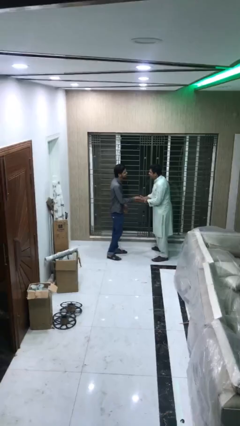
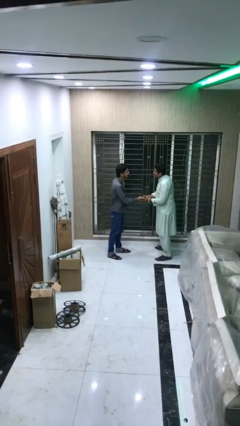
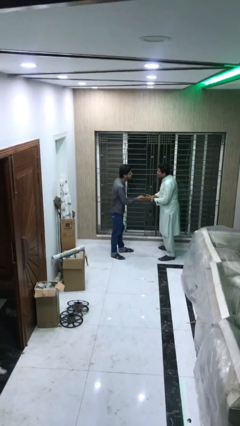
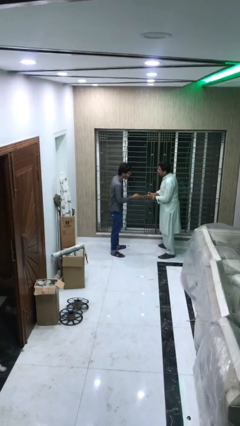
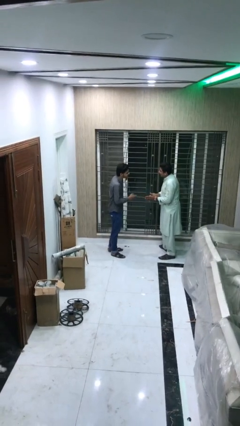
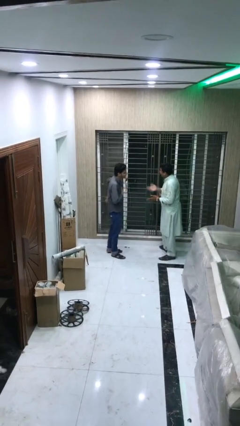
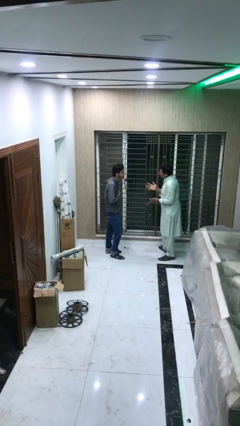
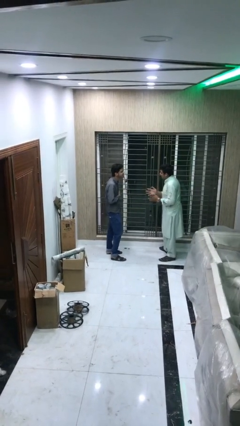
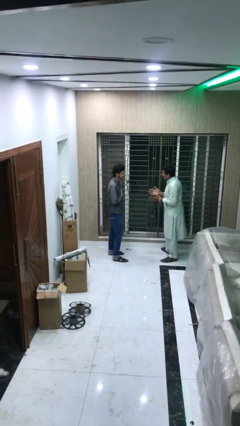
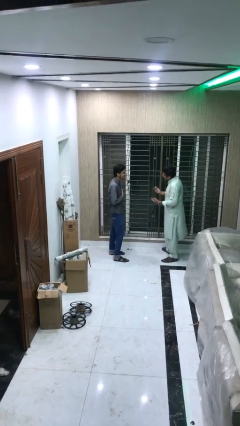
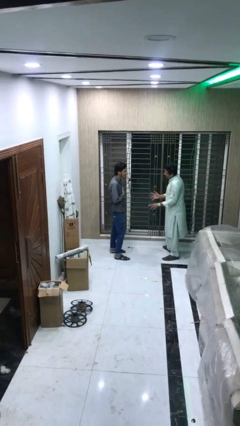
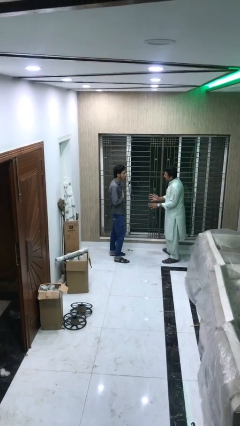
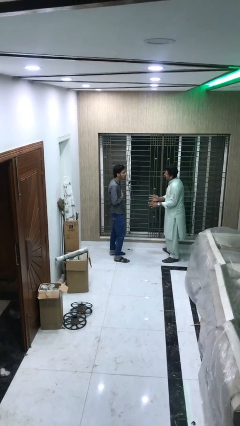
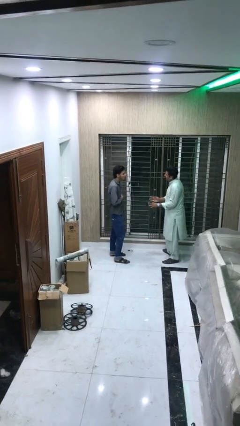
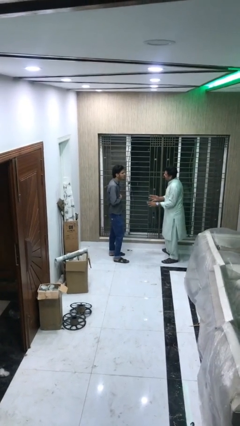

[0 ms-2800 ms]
person talks to person

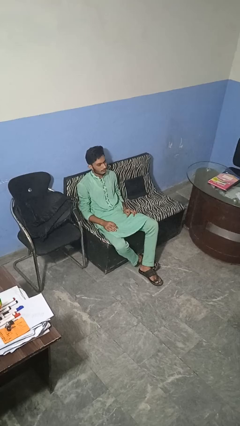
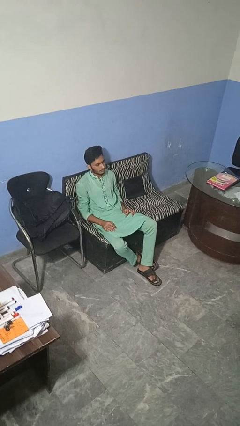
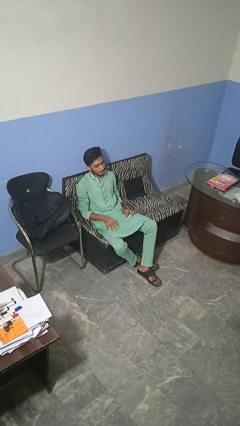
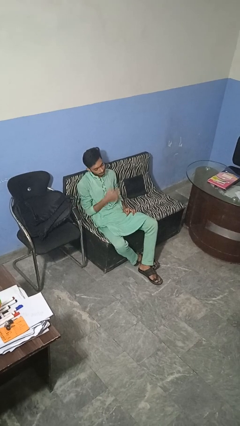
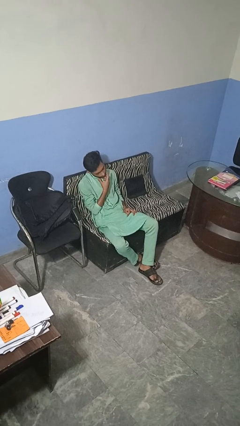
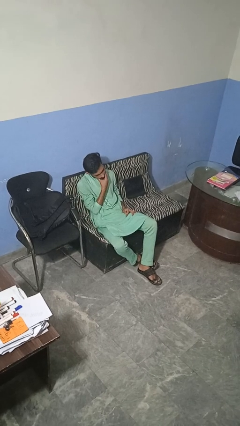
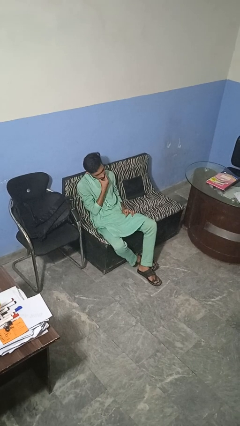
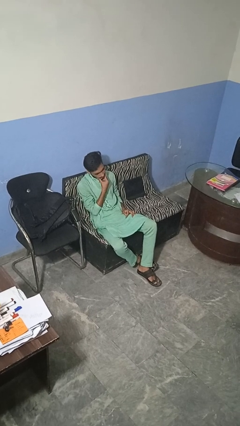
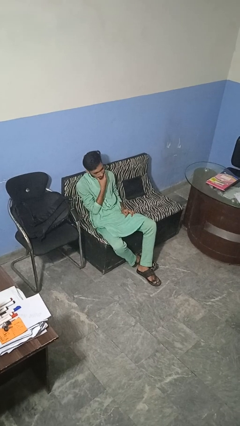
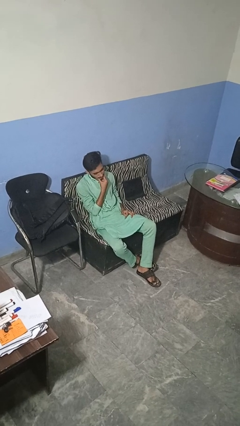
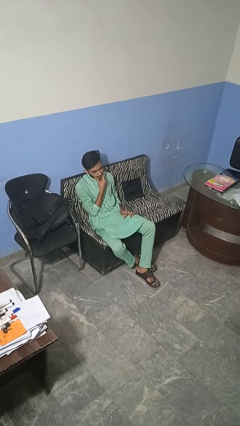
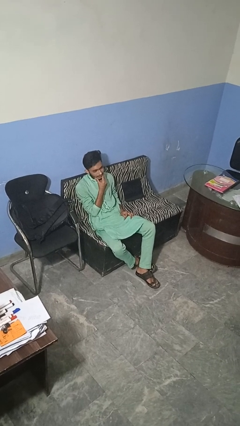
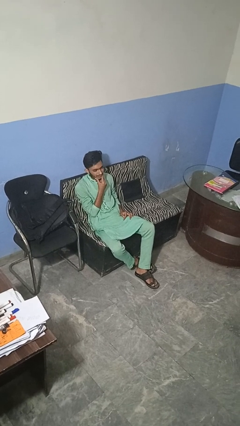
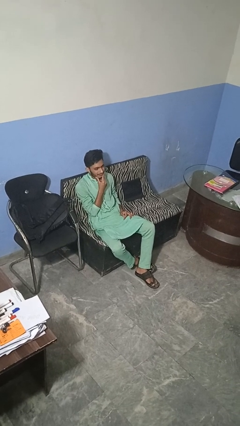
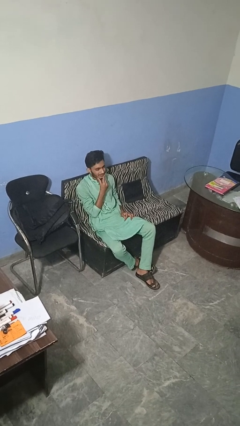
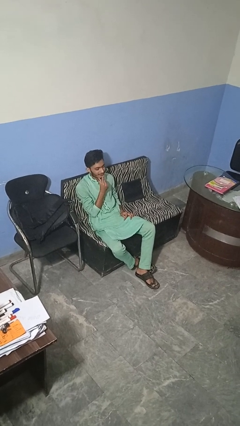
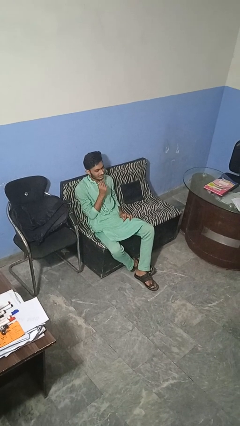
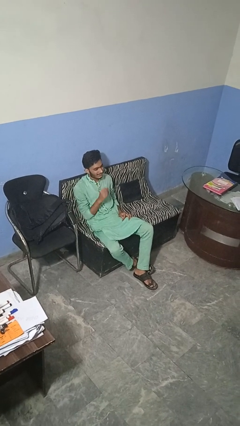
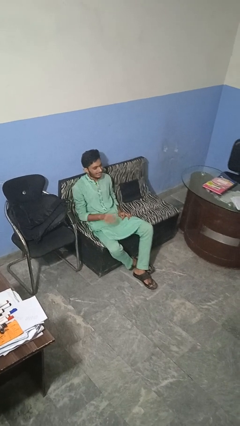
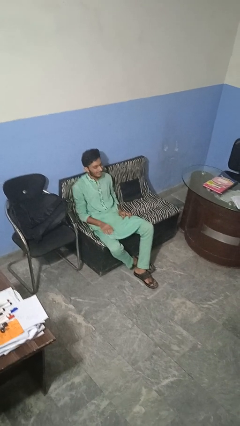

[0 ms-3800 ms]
person strokes chin

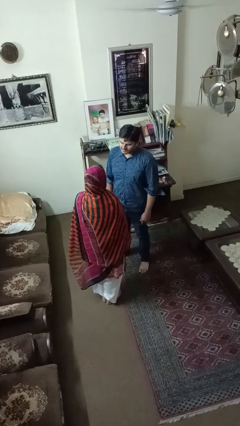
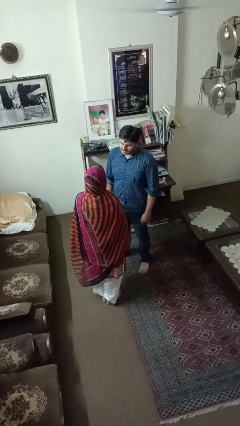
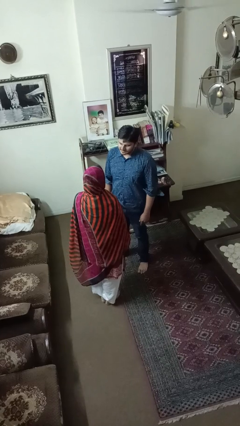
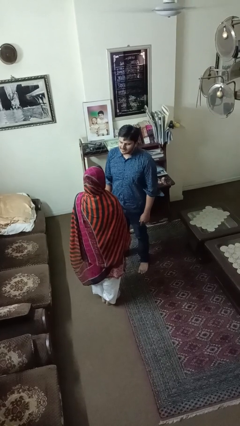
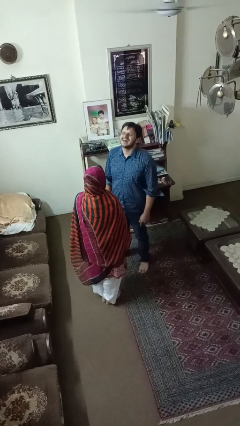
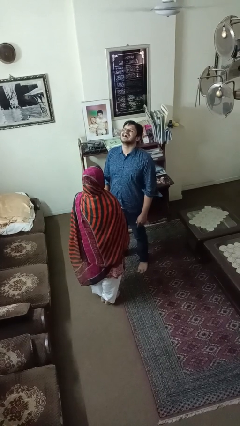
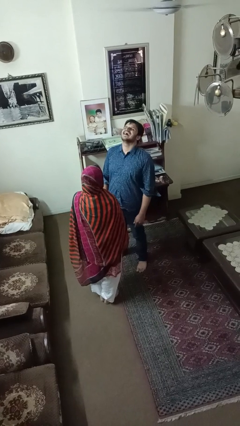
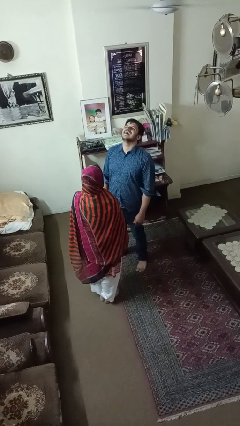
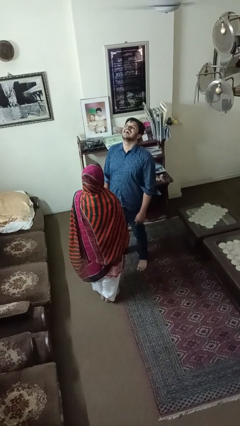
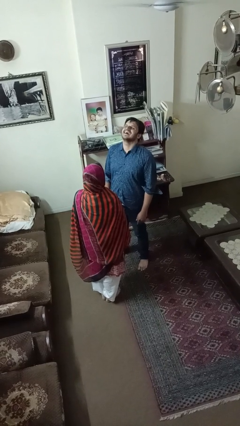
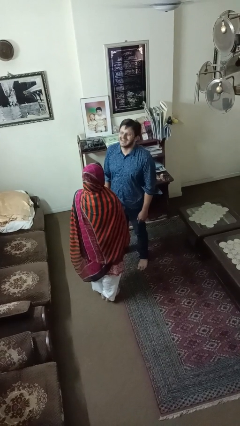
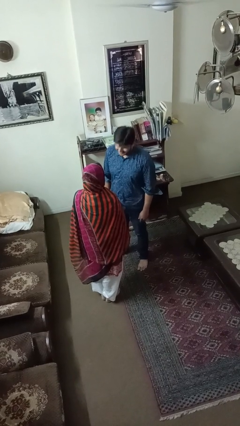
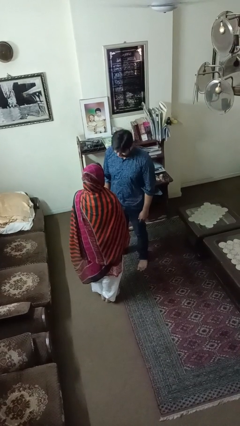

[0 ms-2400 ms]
person laughs with person

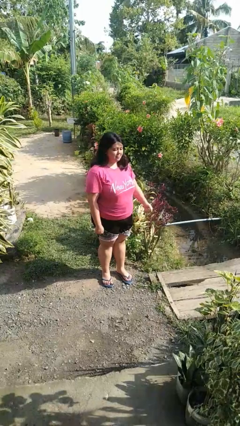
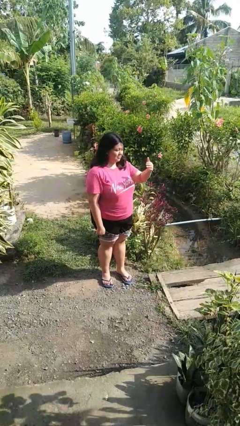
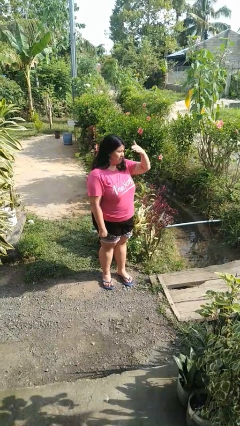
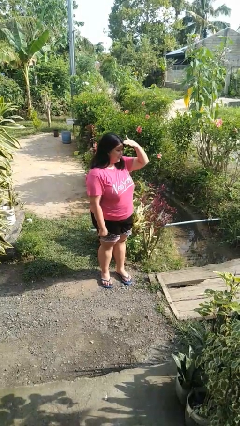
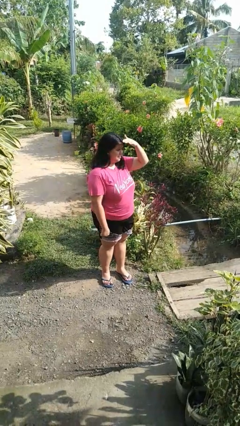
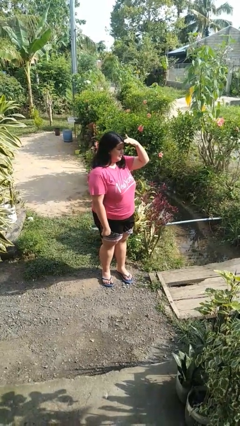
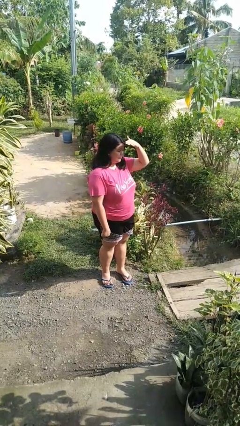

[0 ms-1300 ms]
person shades eyes

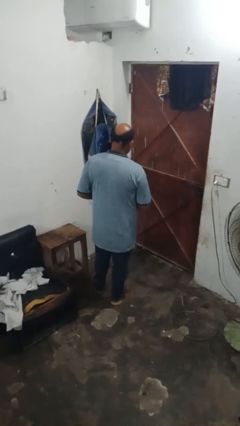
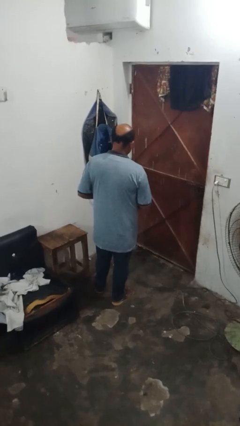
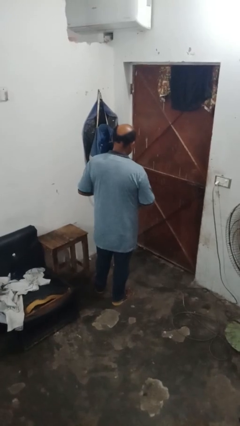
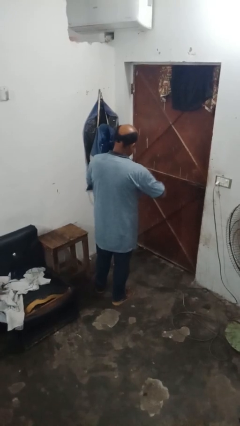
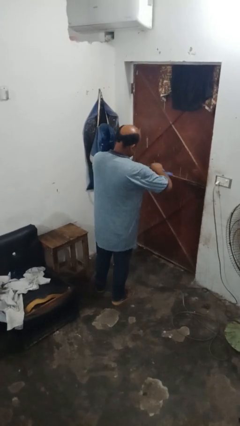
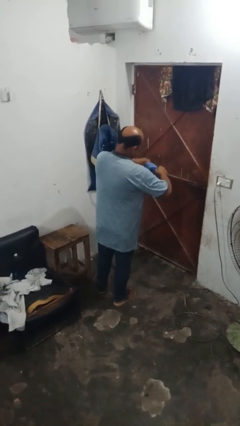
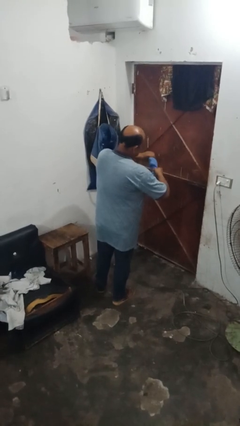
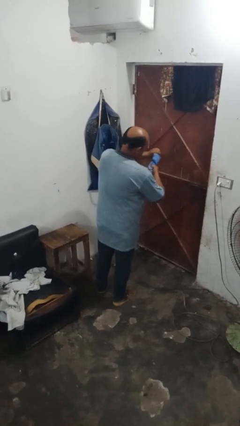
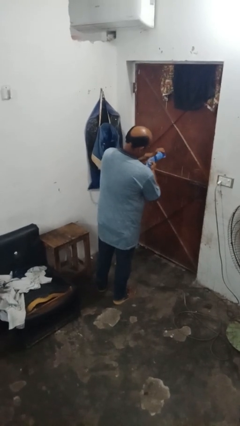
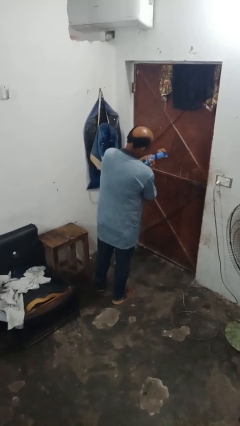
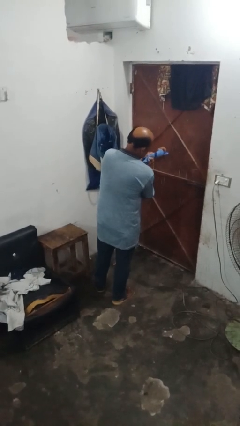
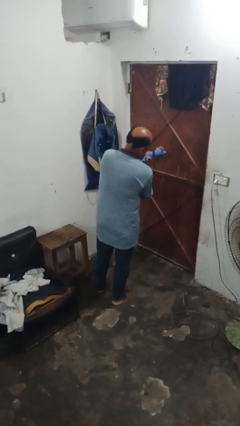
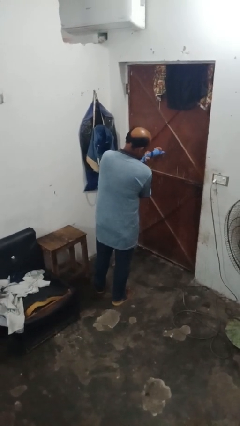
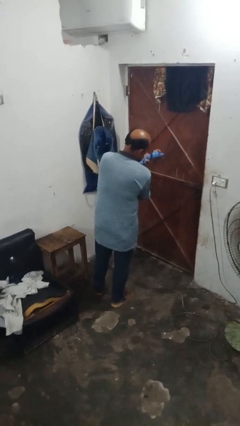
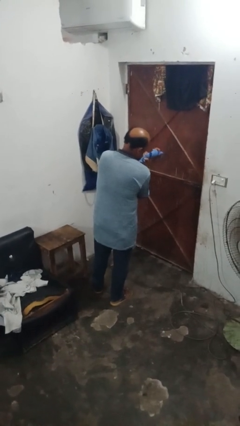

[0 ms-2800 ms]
person squeezes object

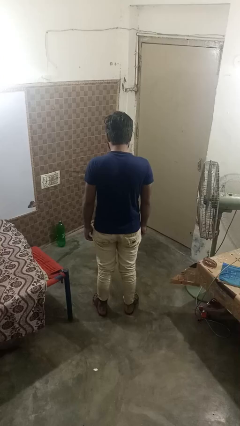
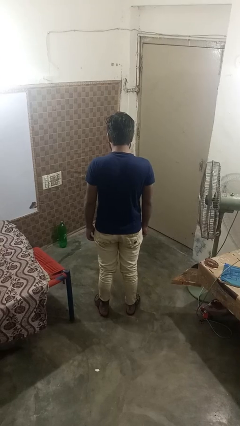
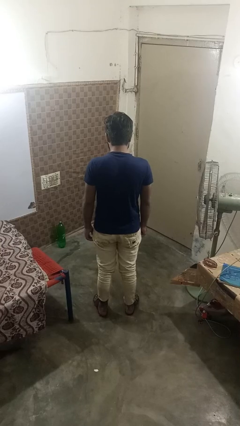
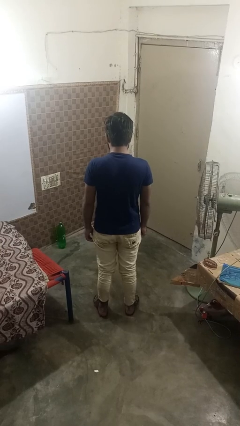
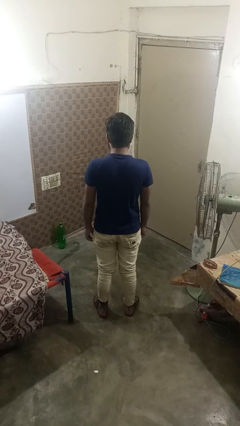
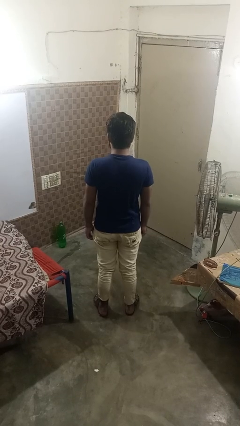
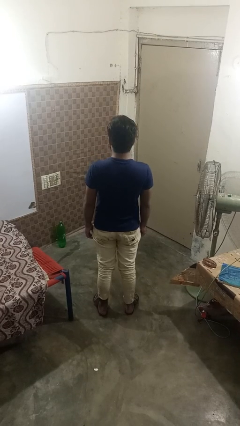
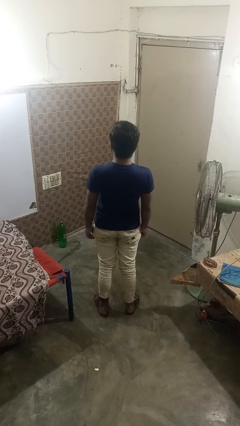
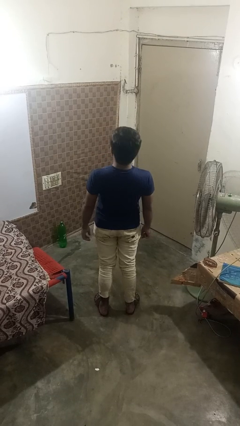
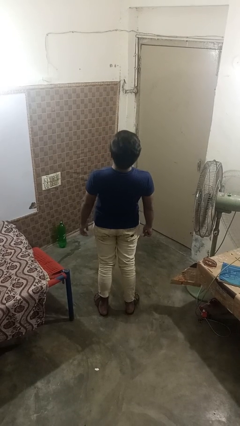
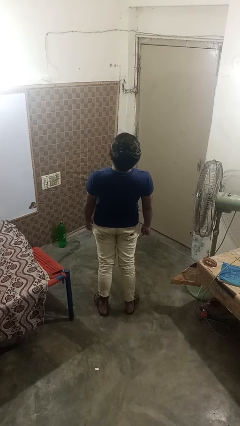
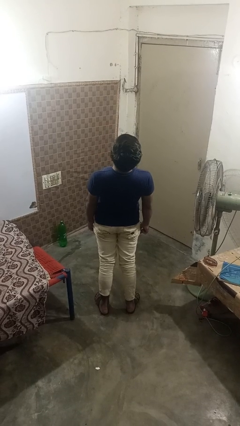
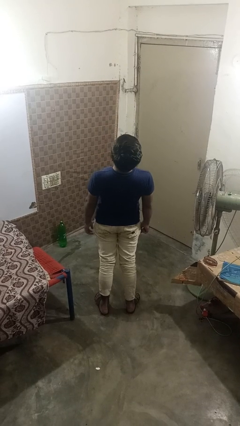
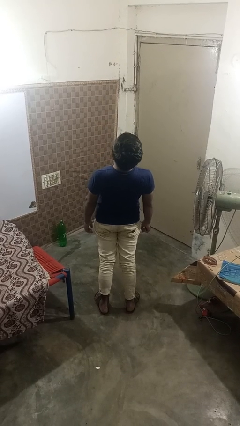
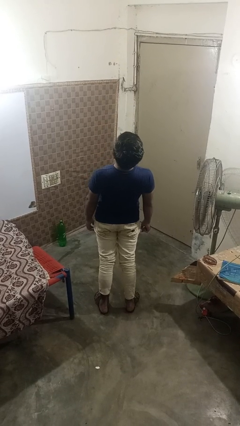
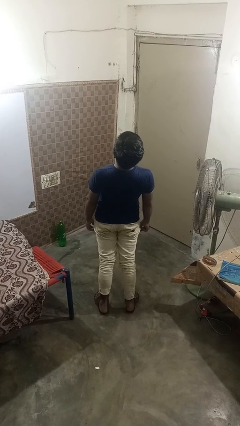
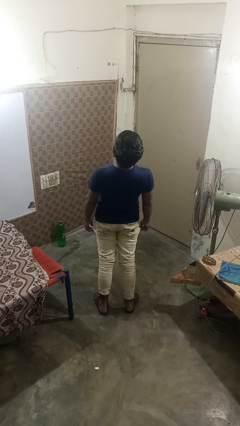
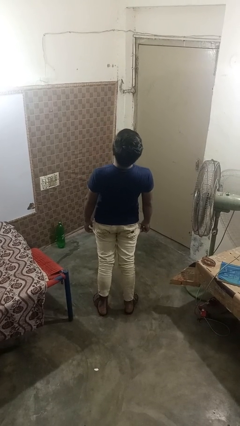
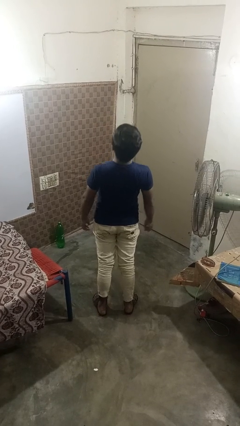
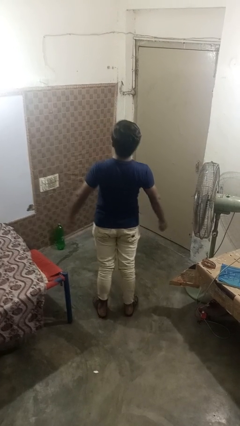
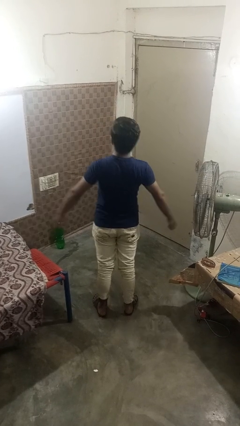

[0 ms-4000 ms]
person stretches back

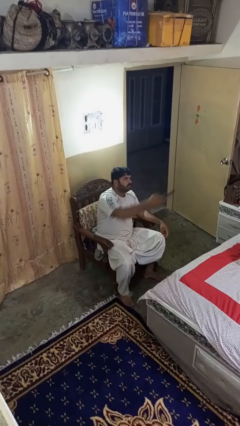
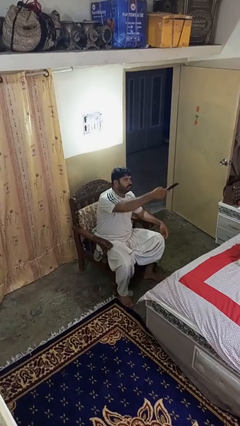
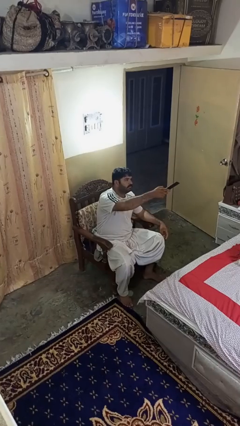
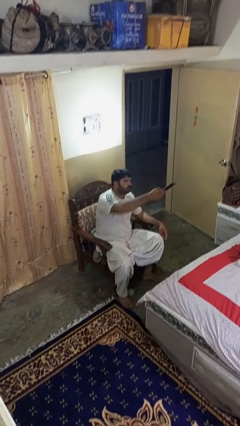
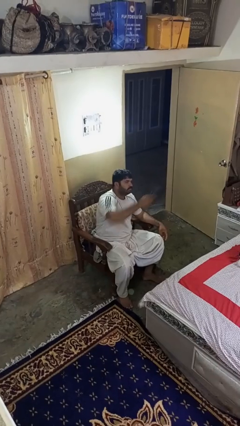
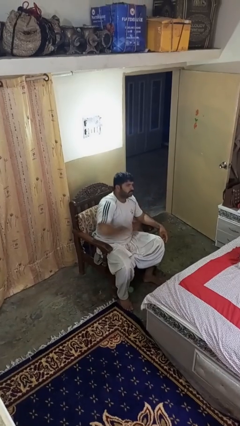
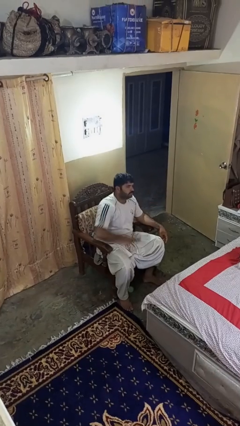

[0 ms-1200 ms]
person uses television remote
